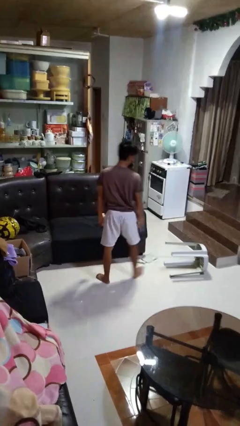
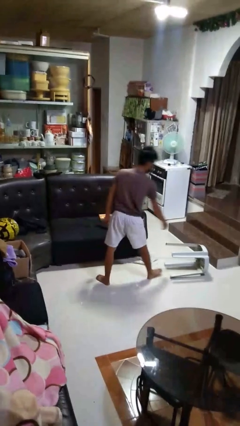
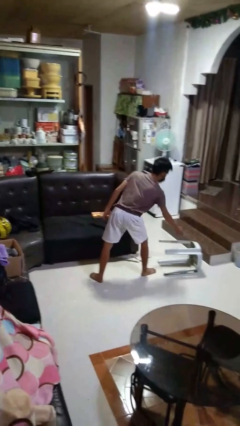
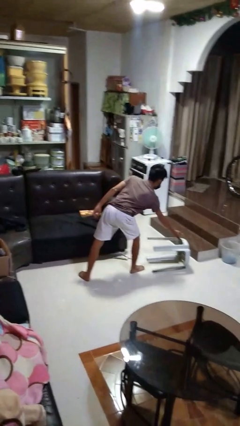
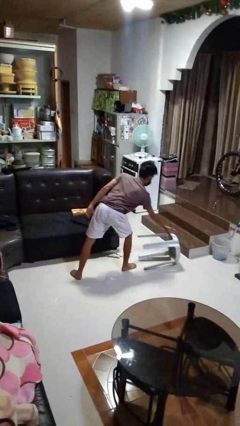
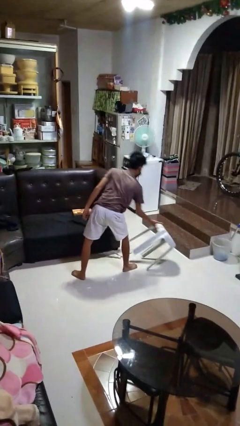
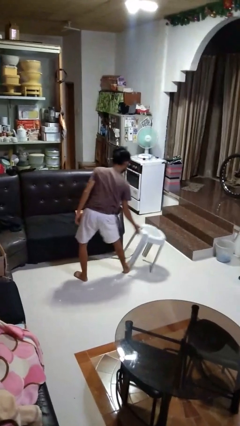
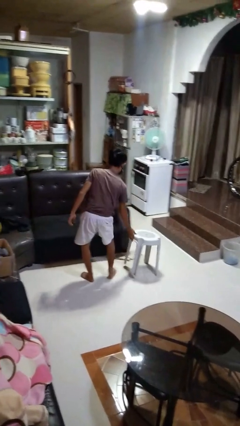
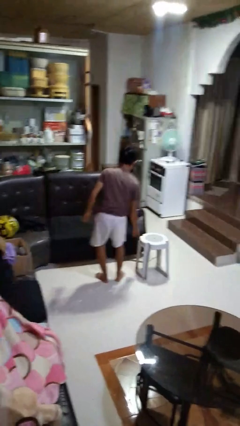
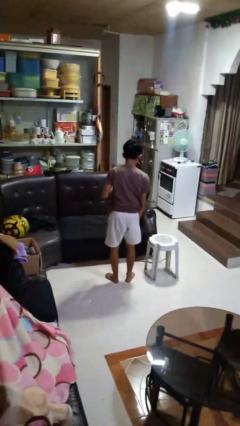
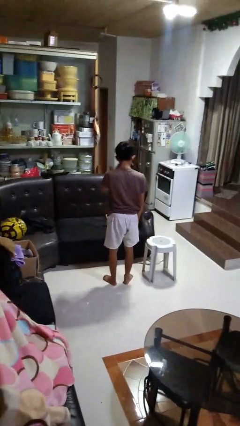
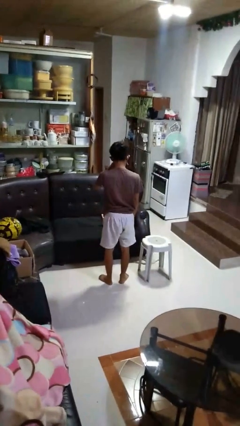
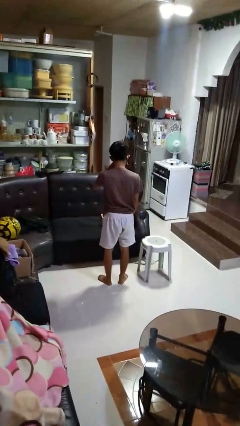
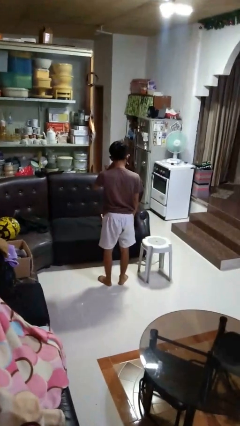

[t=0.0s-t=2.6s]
person sets upright furniture

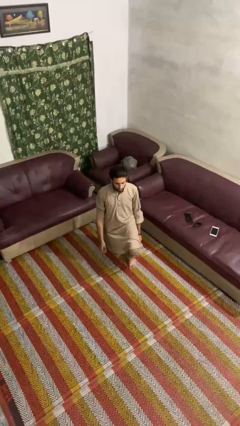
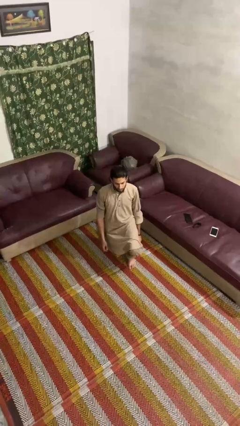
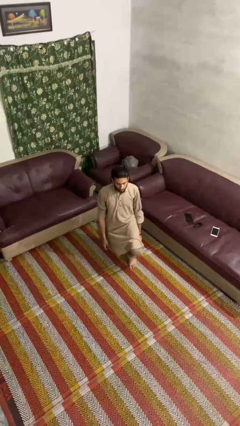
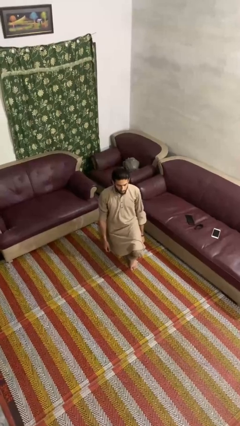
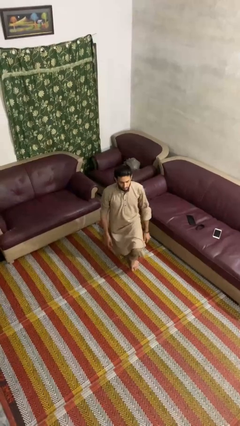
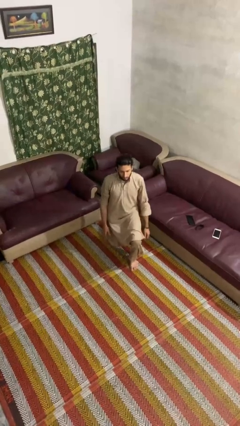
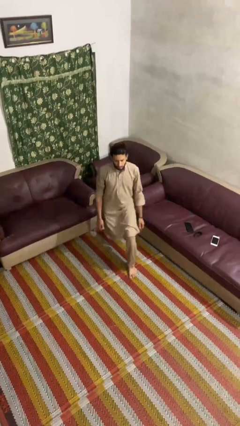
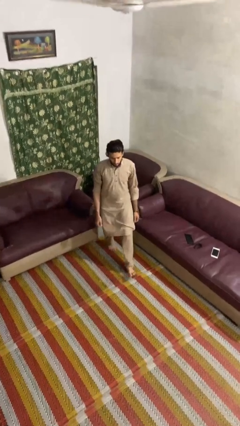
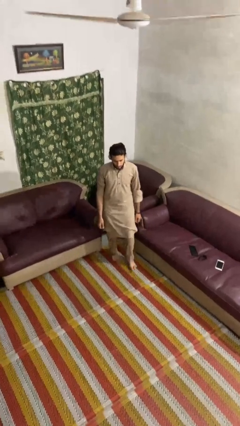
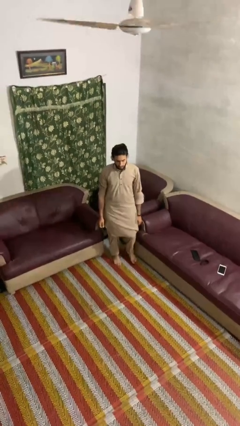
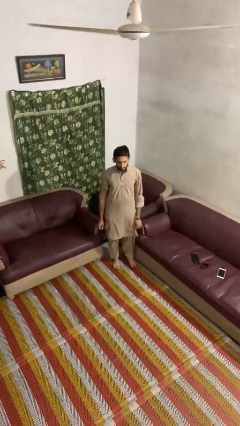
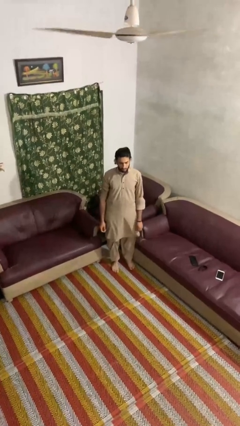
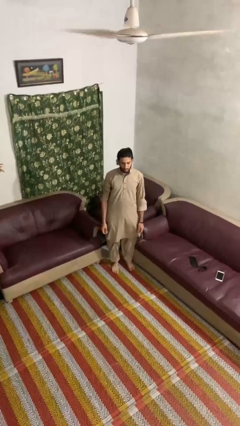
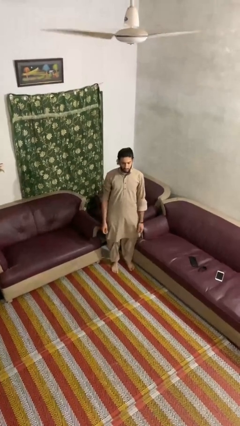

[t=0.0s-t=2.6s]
person stands up from floor

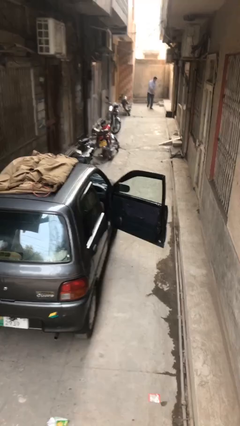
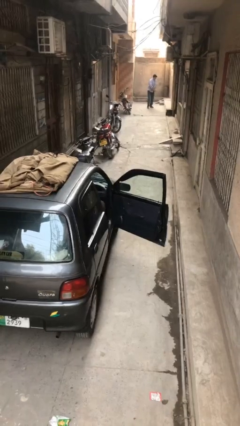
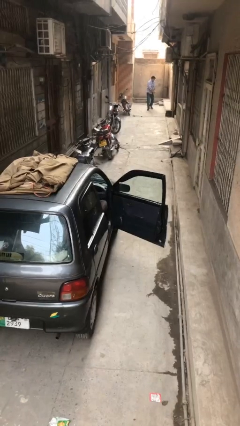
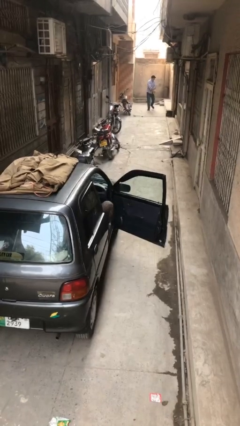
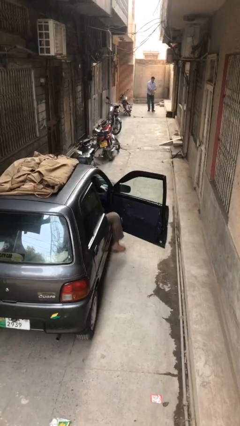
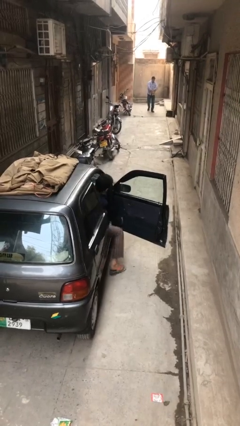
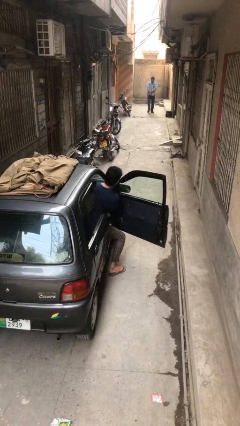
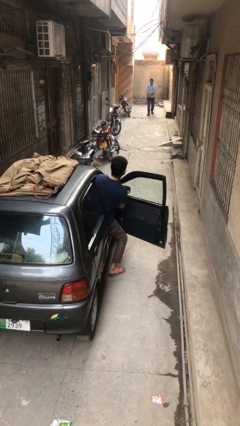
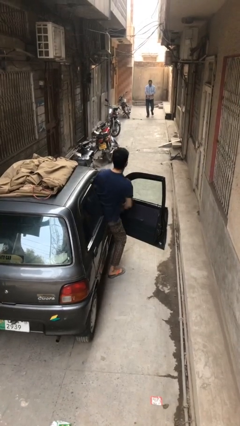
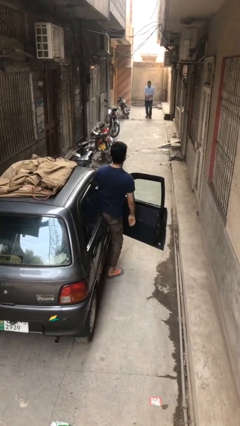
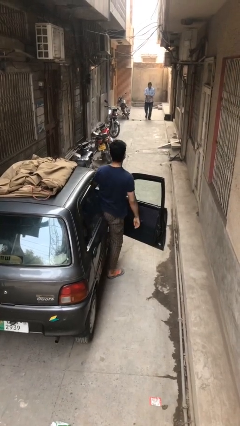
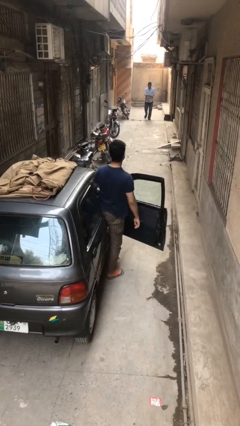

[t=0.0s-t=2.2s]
person exits car

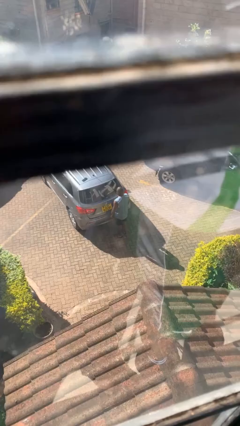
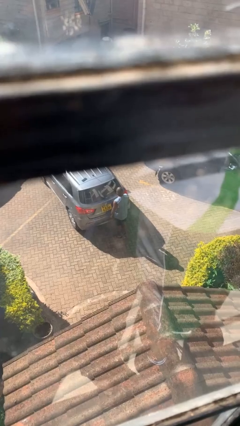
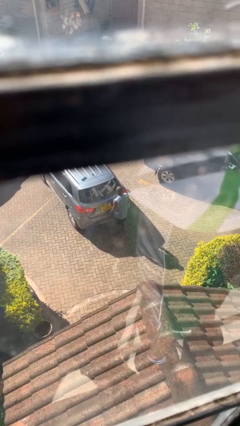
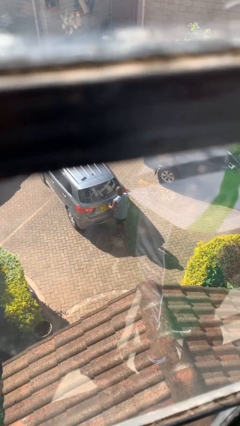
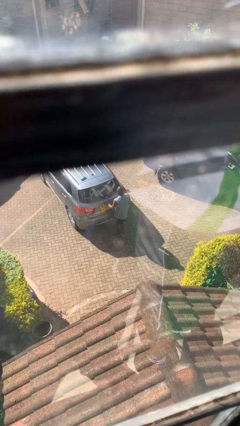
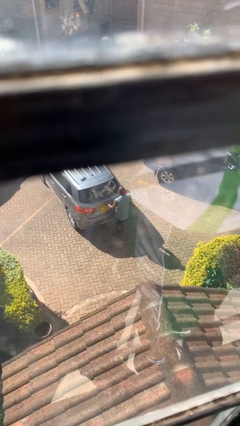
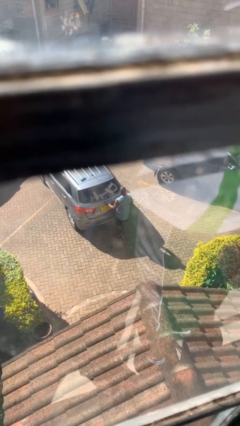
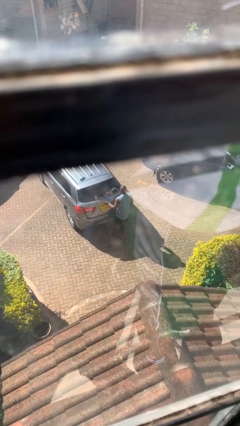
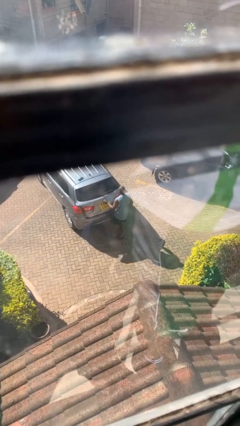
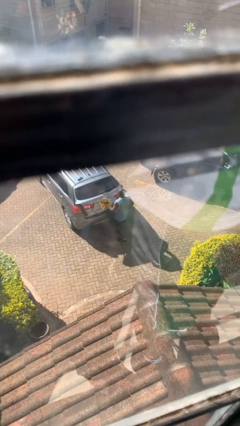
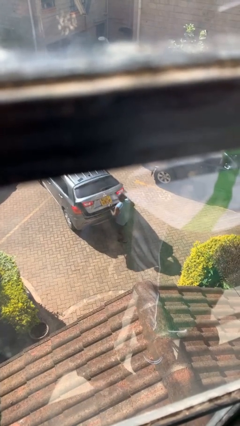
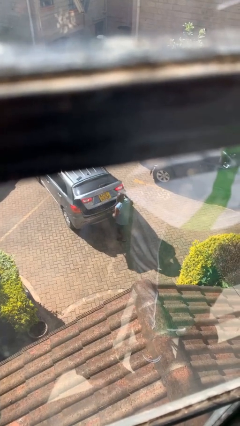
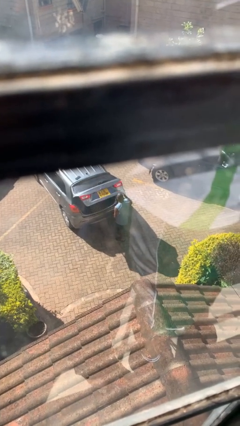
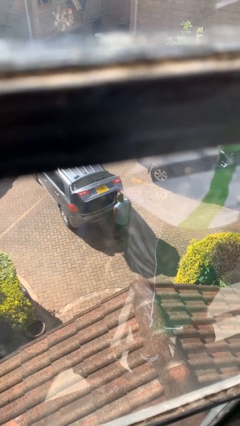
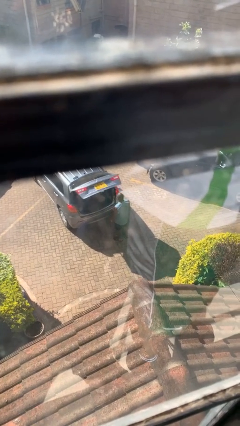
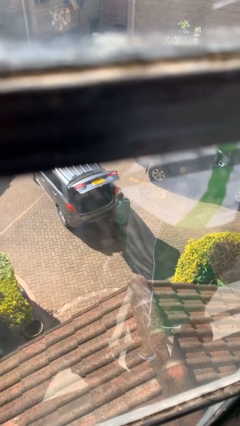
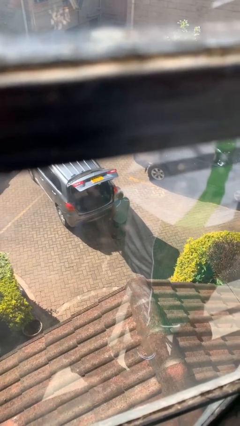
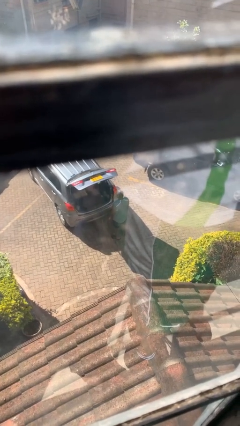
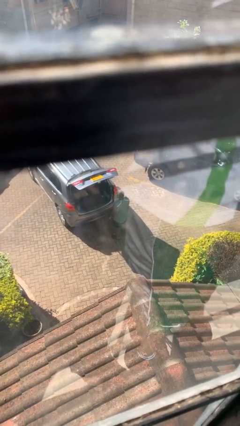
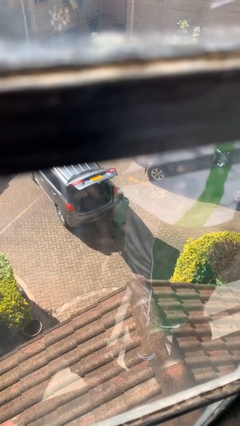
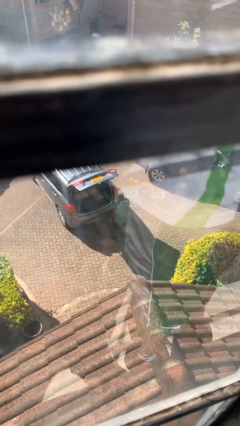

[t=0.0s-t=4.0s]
person opens car trunk

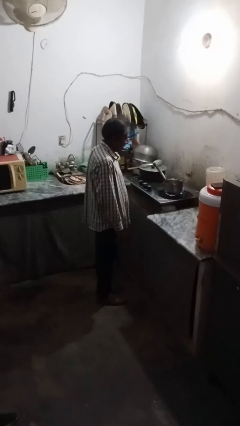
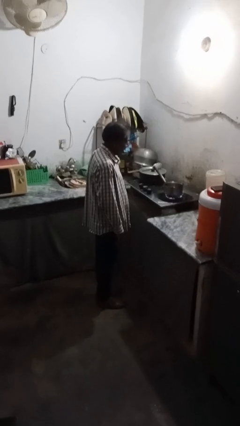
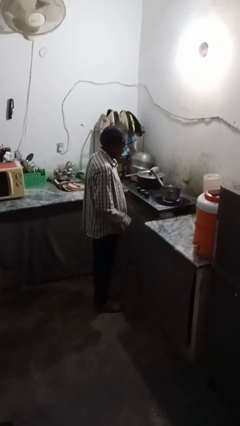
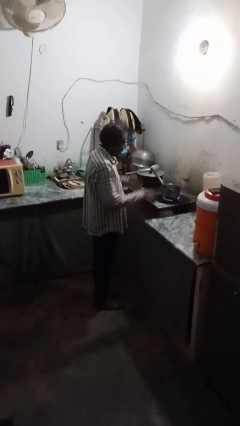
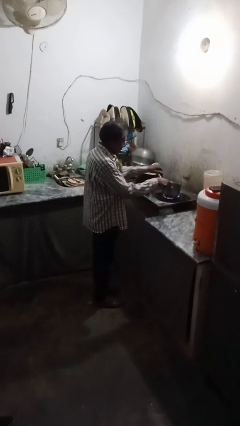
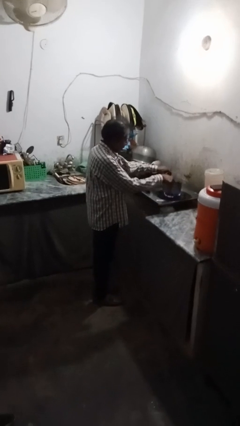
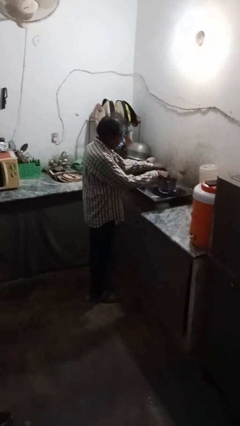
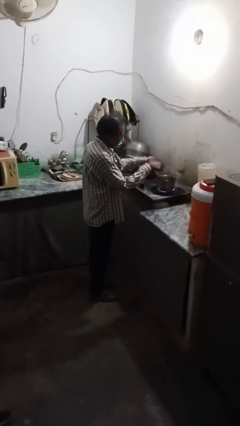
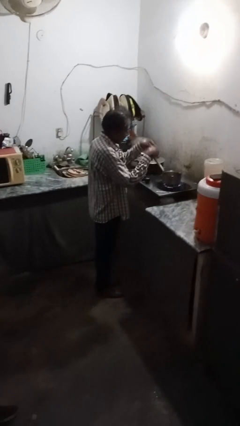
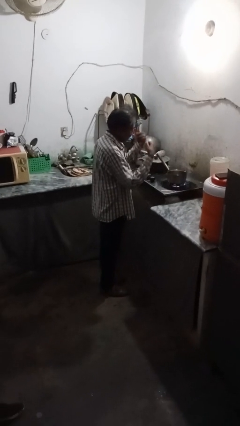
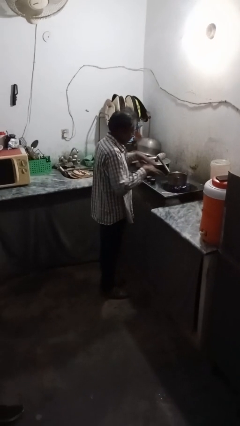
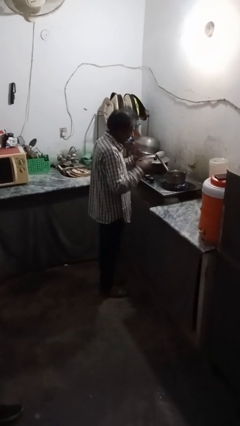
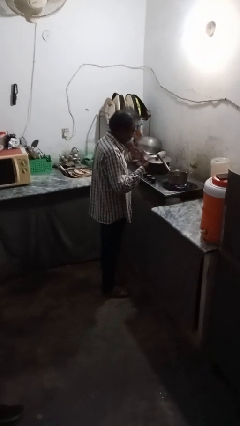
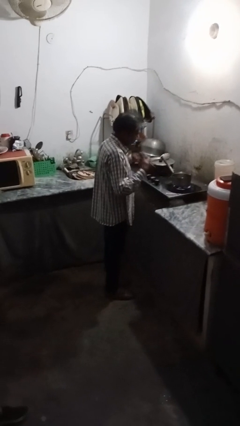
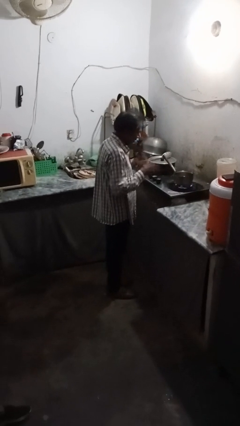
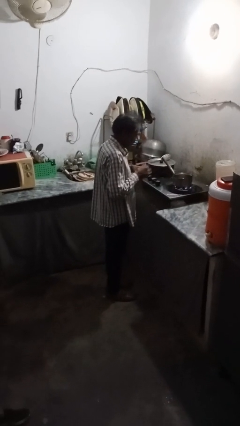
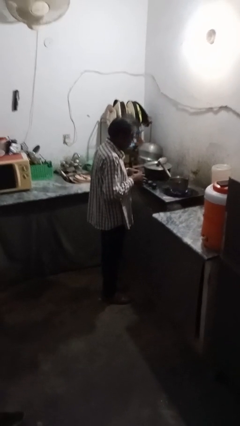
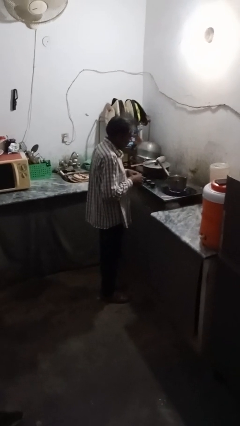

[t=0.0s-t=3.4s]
person burns hand

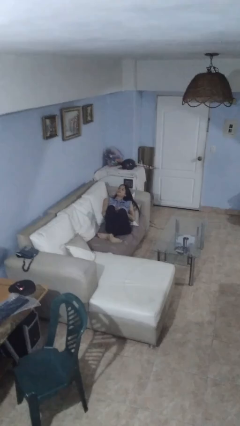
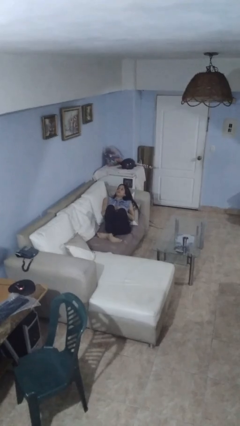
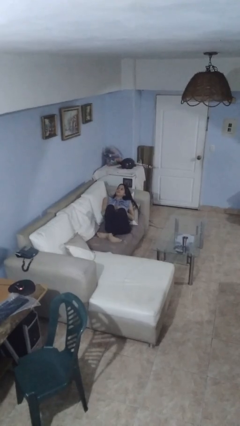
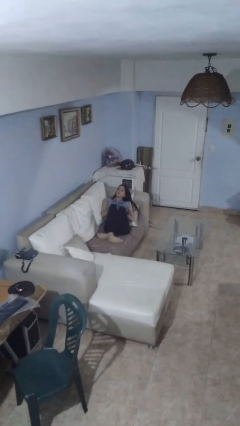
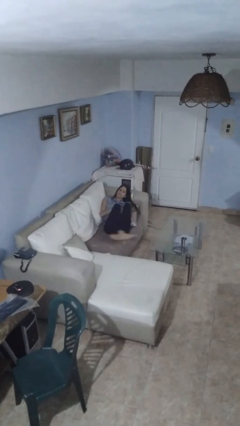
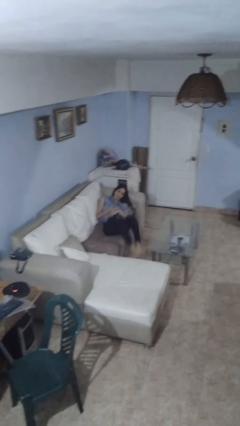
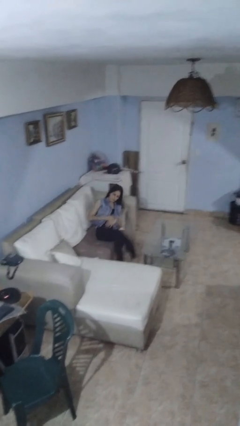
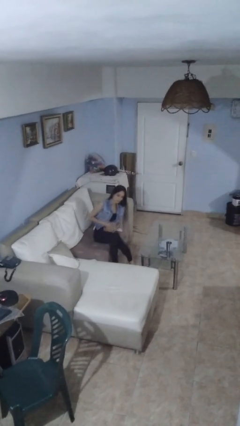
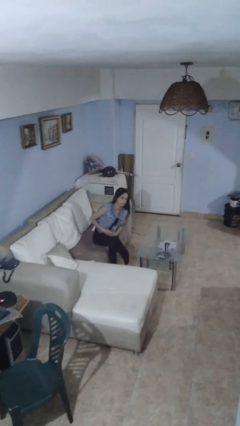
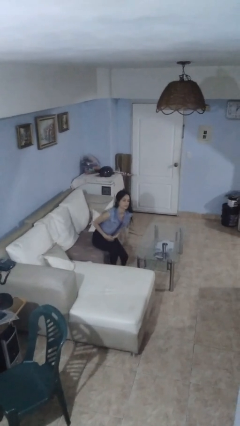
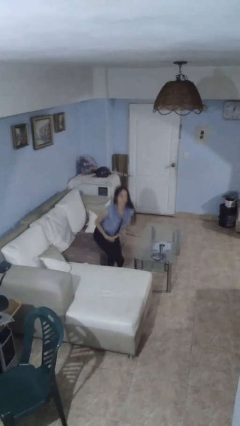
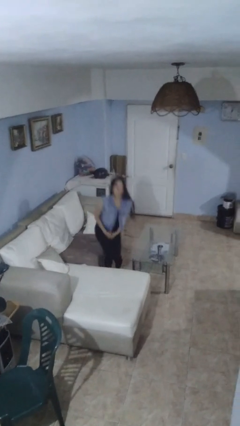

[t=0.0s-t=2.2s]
person stands up
